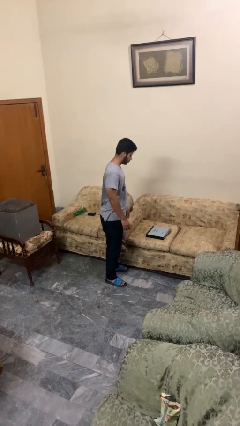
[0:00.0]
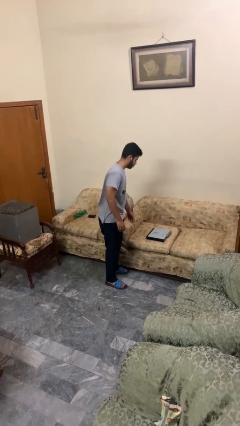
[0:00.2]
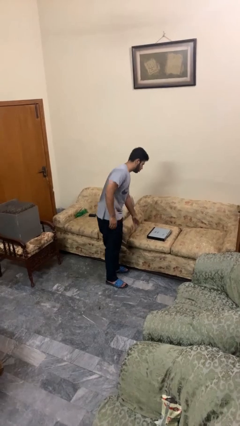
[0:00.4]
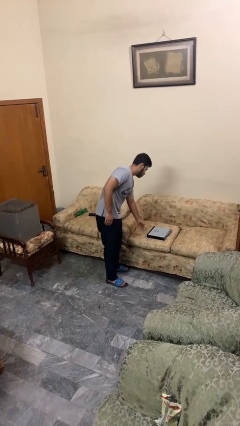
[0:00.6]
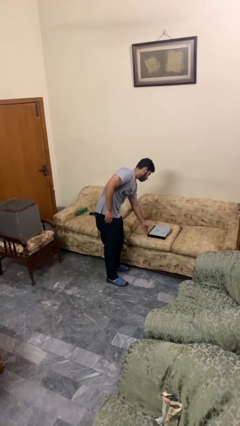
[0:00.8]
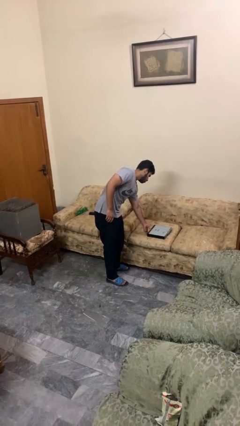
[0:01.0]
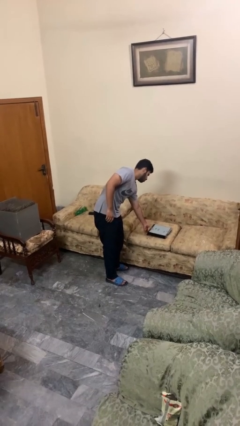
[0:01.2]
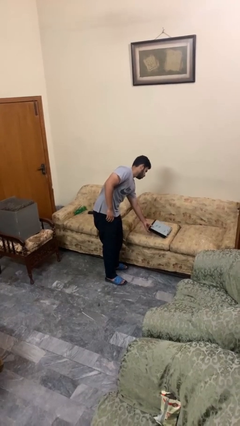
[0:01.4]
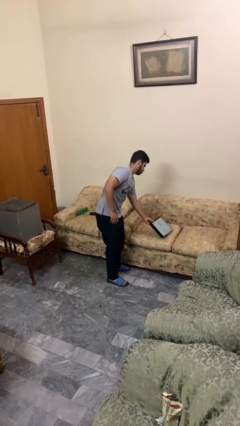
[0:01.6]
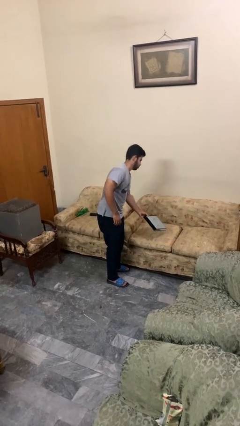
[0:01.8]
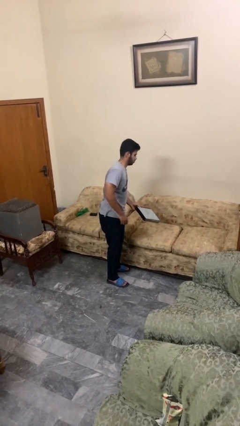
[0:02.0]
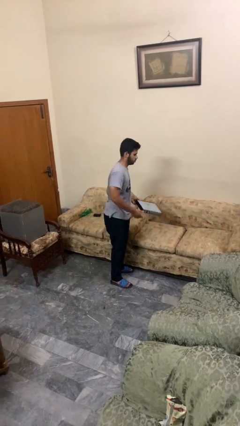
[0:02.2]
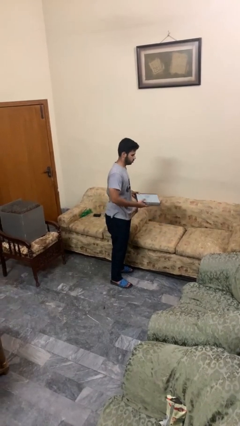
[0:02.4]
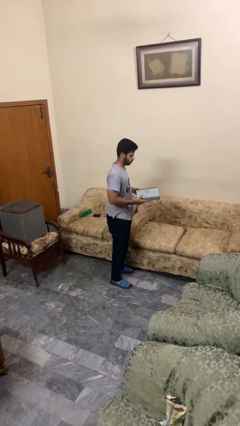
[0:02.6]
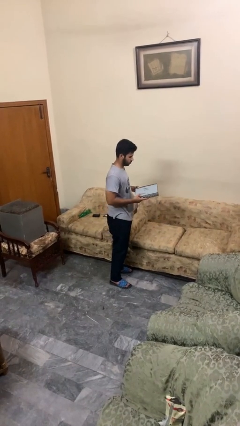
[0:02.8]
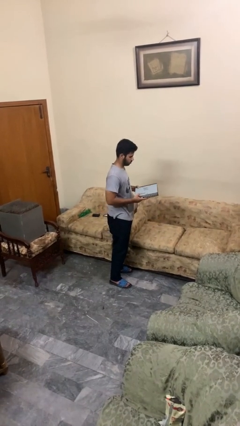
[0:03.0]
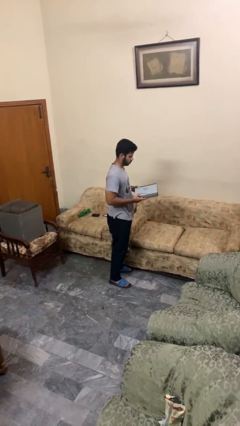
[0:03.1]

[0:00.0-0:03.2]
person picks up object from couch

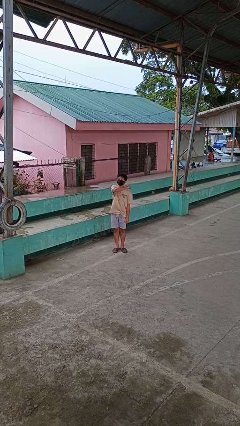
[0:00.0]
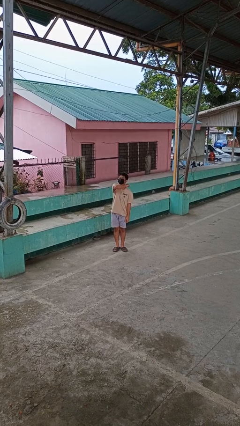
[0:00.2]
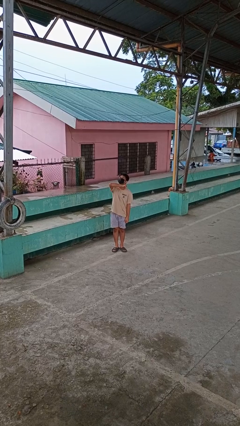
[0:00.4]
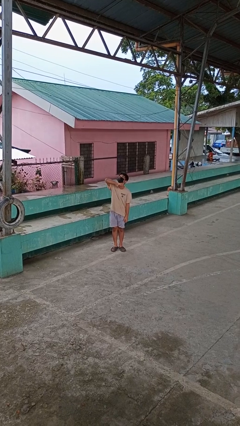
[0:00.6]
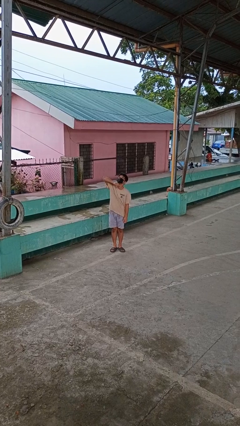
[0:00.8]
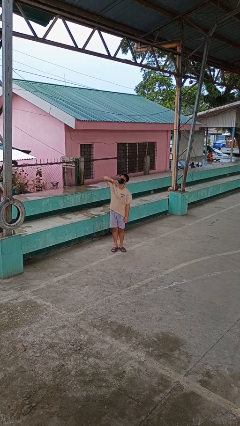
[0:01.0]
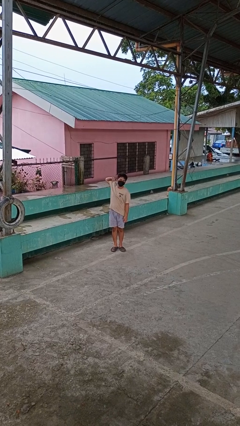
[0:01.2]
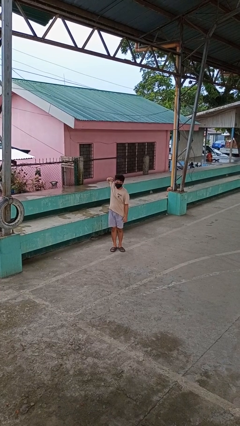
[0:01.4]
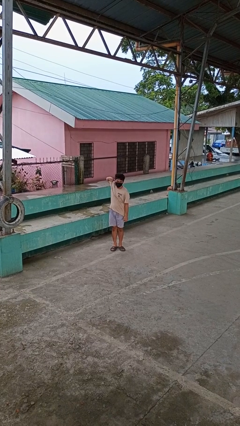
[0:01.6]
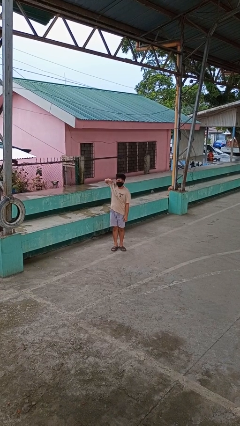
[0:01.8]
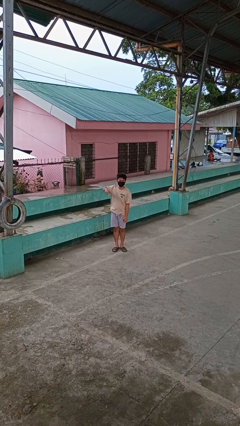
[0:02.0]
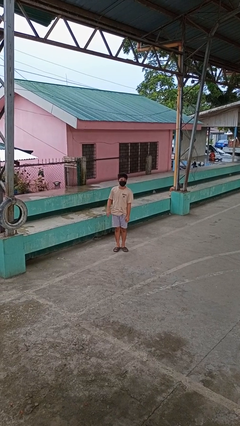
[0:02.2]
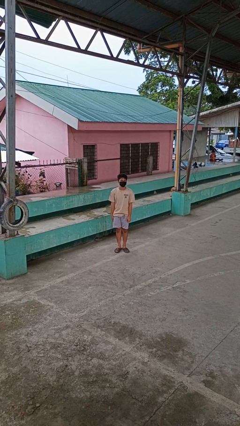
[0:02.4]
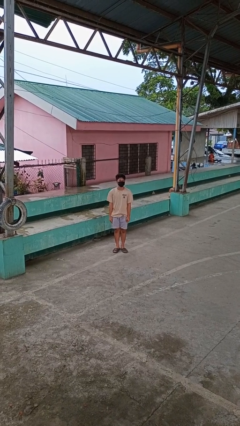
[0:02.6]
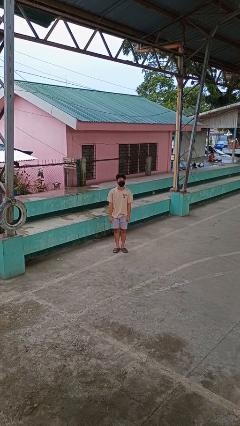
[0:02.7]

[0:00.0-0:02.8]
person gestures cut

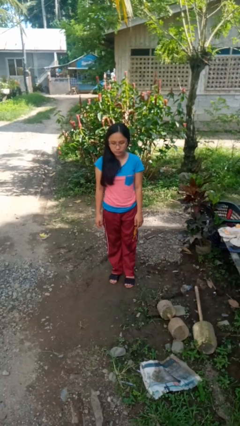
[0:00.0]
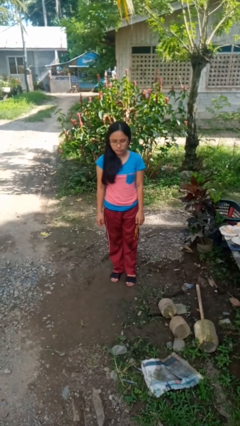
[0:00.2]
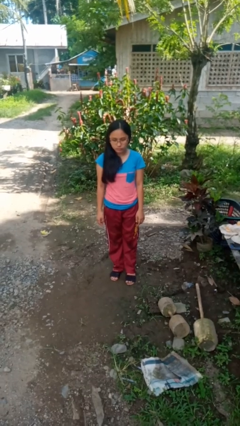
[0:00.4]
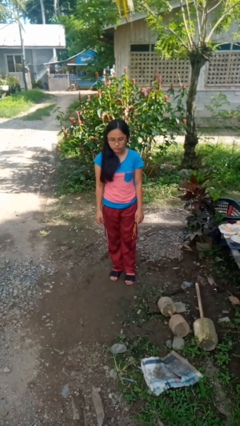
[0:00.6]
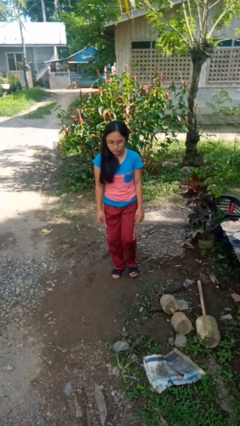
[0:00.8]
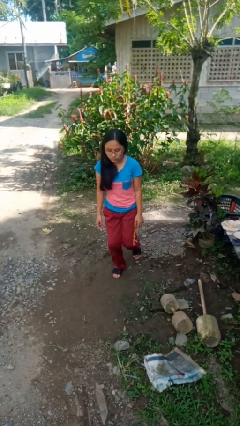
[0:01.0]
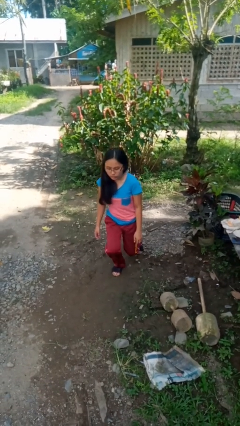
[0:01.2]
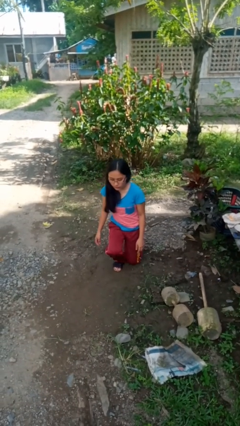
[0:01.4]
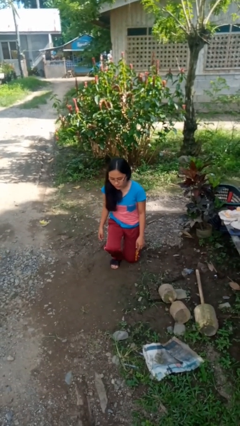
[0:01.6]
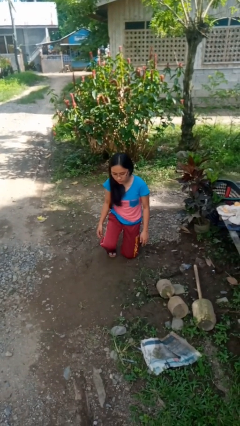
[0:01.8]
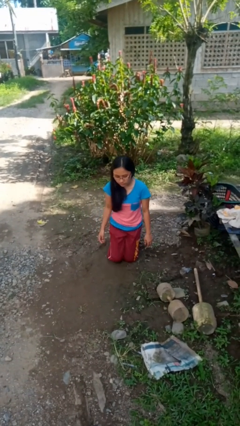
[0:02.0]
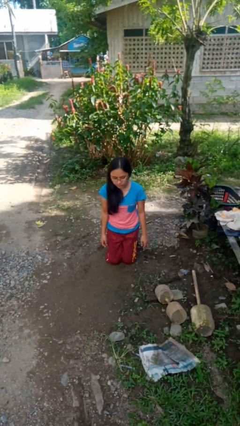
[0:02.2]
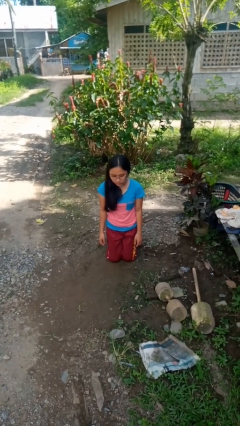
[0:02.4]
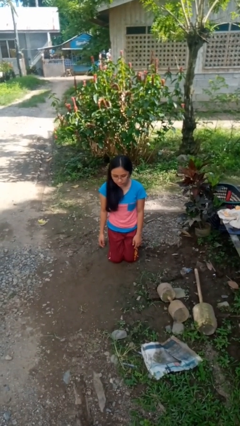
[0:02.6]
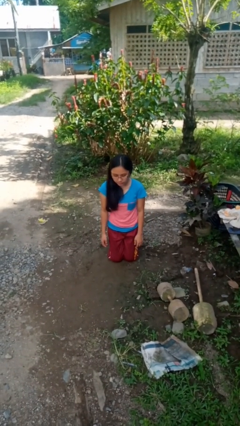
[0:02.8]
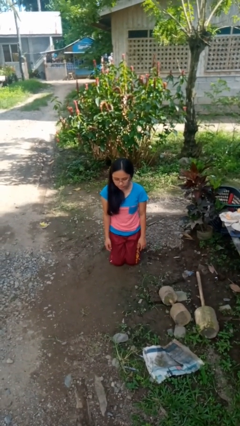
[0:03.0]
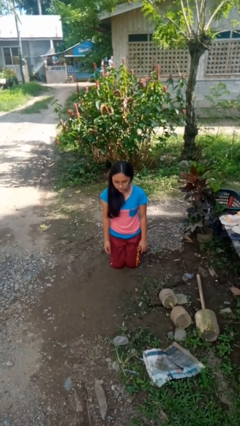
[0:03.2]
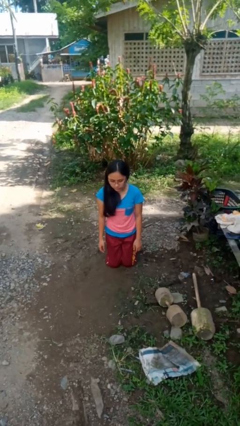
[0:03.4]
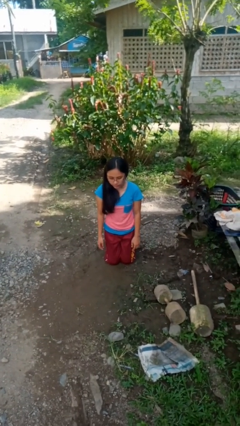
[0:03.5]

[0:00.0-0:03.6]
person kneels

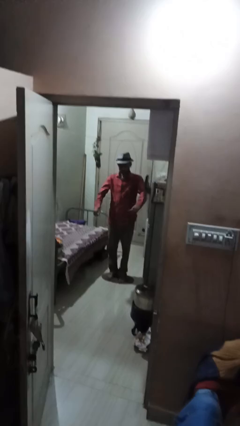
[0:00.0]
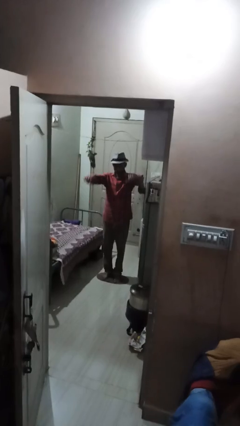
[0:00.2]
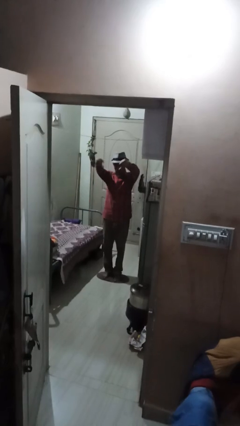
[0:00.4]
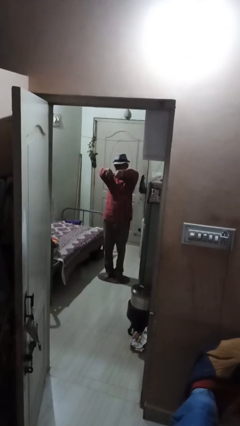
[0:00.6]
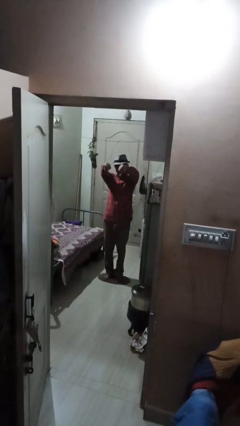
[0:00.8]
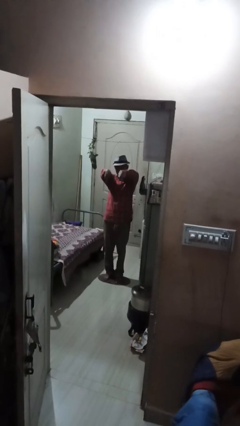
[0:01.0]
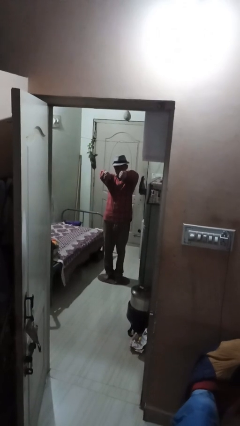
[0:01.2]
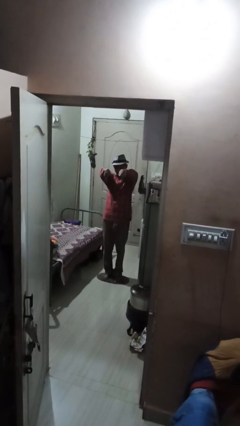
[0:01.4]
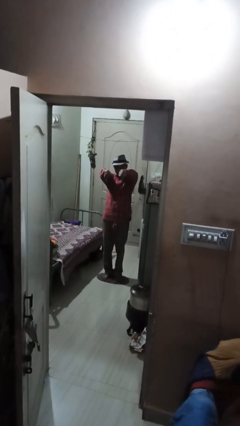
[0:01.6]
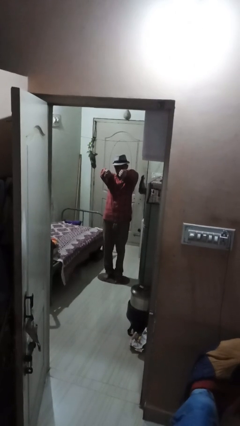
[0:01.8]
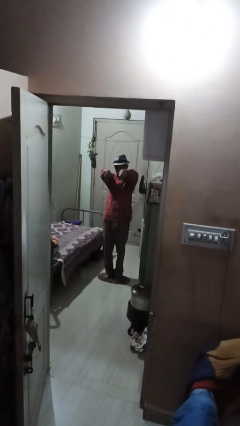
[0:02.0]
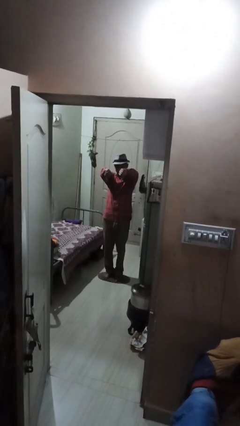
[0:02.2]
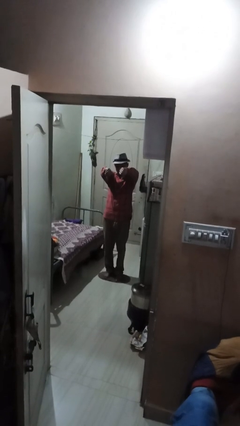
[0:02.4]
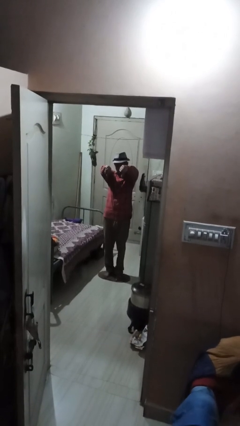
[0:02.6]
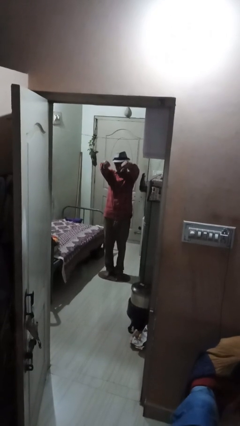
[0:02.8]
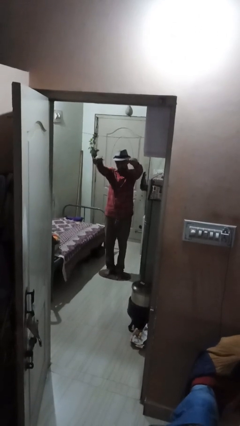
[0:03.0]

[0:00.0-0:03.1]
person gestures thumbs down

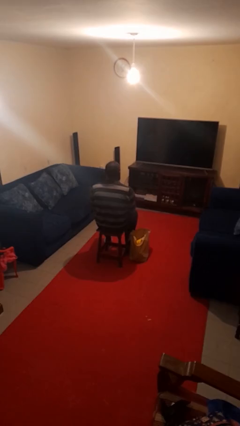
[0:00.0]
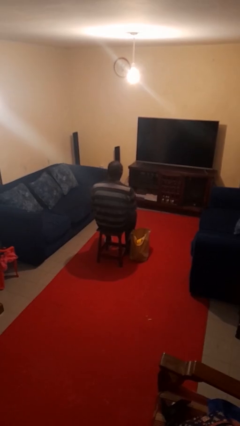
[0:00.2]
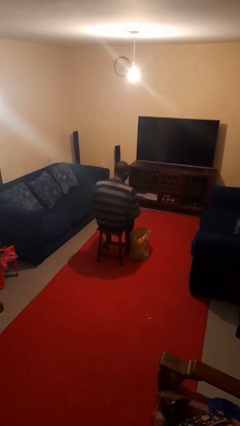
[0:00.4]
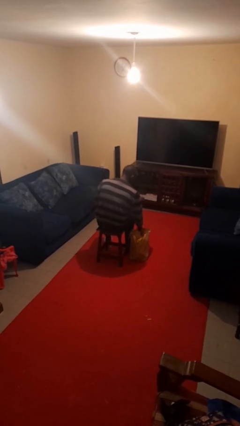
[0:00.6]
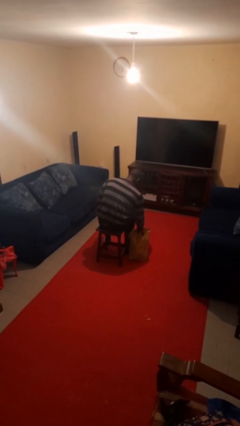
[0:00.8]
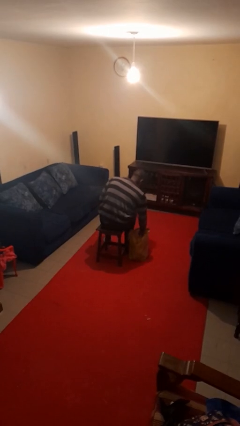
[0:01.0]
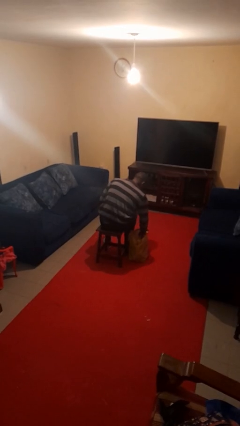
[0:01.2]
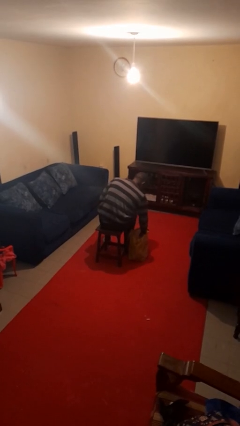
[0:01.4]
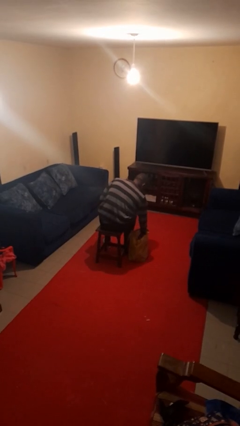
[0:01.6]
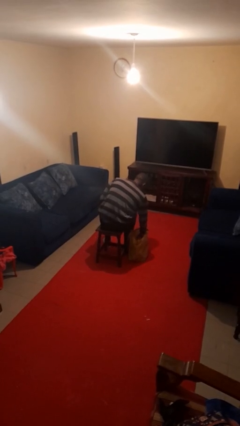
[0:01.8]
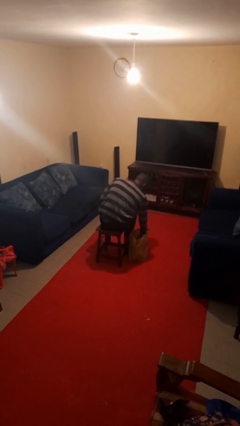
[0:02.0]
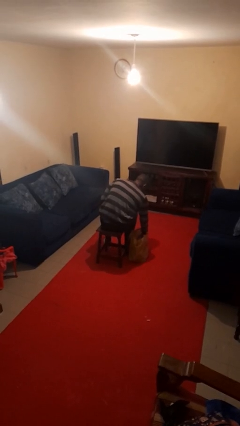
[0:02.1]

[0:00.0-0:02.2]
person searches in bag

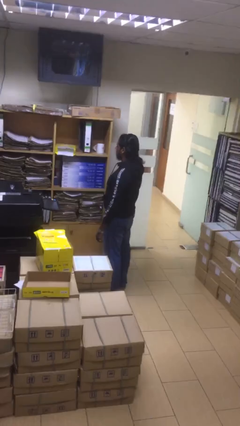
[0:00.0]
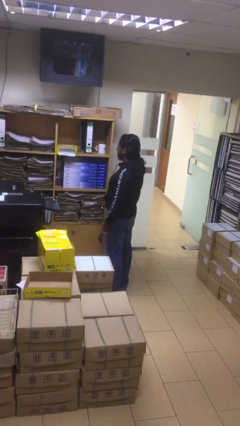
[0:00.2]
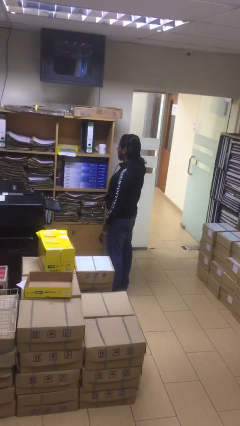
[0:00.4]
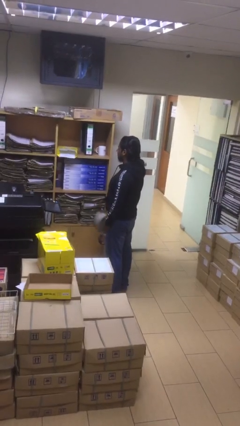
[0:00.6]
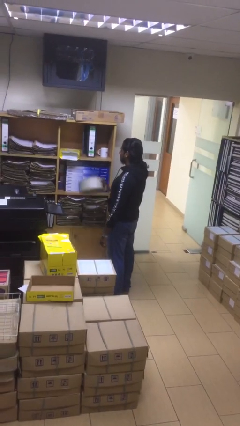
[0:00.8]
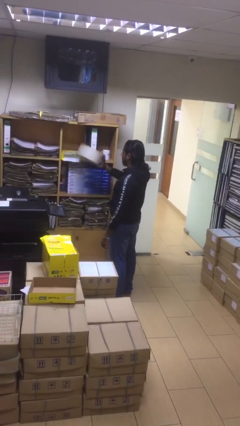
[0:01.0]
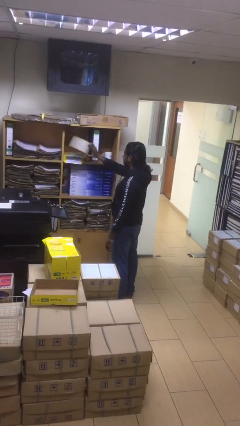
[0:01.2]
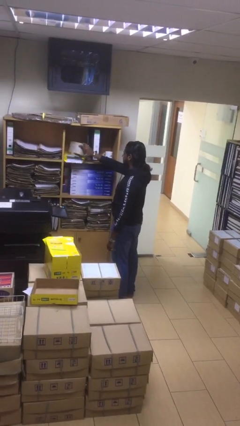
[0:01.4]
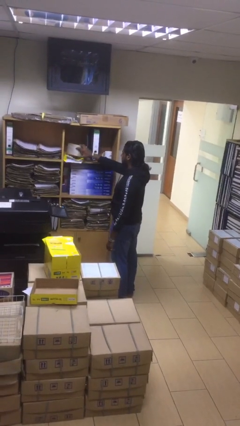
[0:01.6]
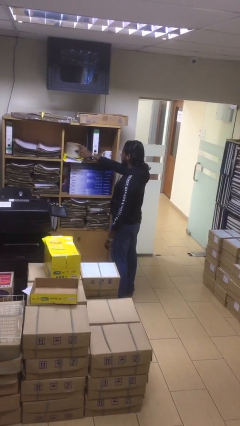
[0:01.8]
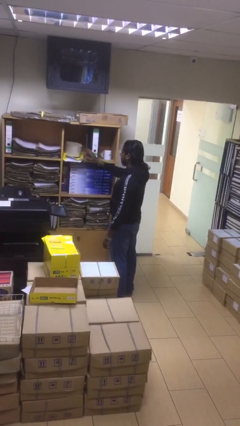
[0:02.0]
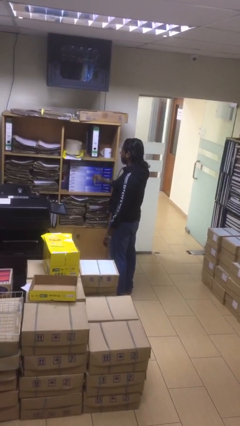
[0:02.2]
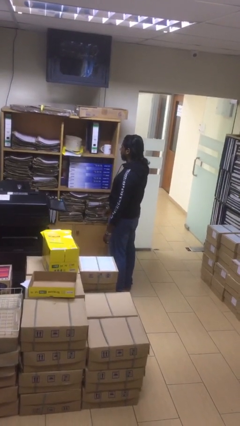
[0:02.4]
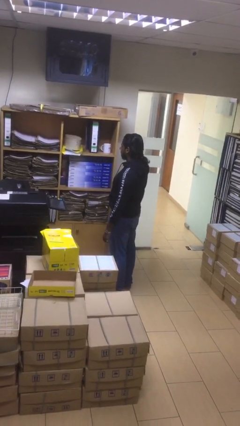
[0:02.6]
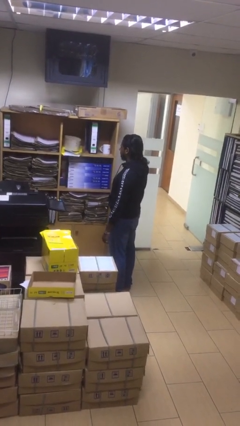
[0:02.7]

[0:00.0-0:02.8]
person puts down object into cabinet

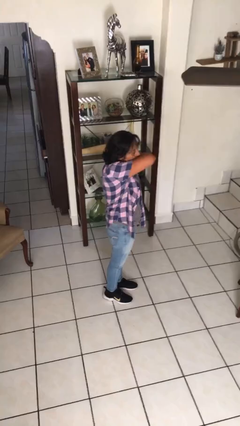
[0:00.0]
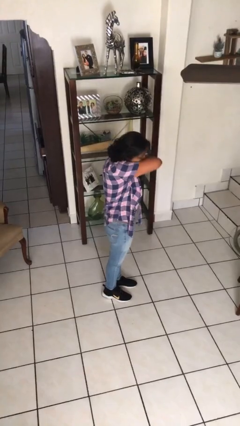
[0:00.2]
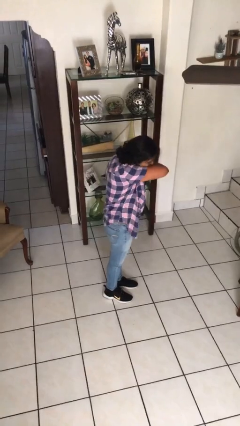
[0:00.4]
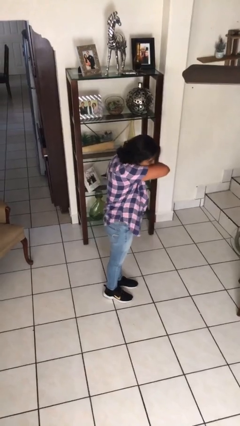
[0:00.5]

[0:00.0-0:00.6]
person sneezes into arm
